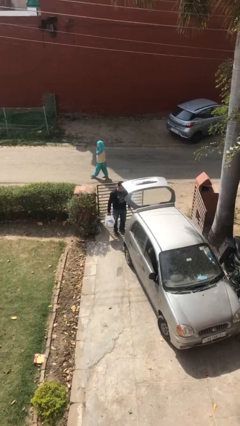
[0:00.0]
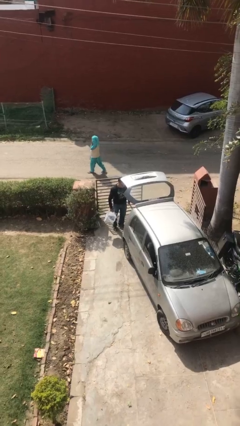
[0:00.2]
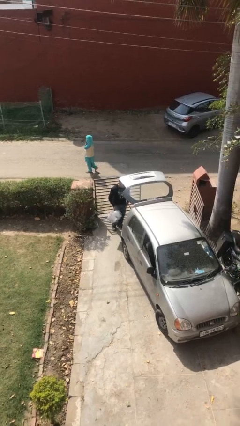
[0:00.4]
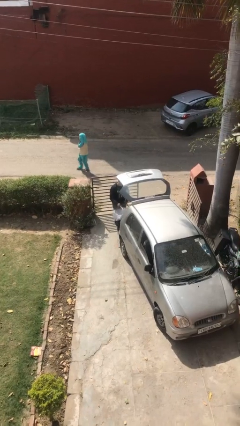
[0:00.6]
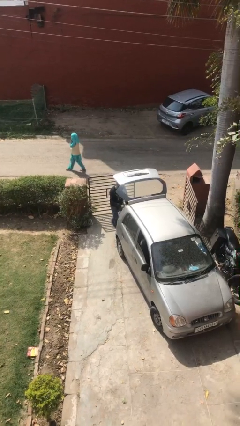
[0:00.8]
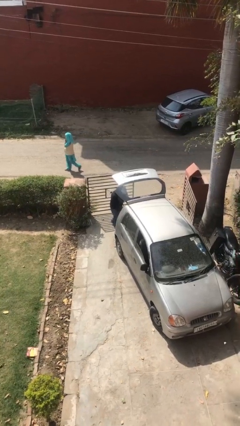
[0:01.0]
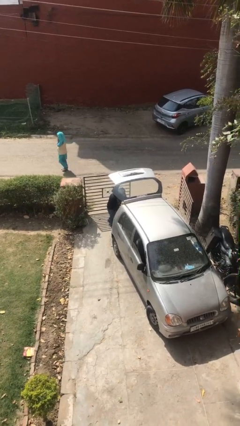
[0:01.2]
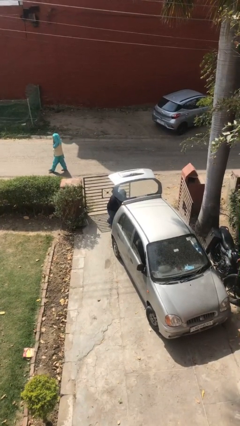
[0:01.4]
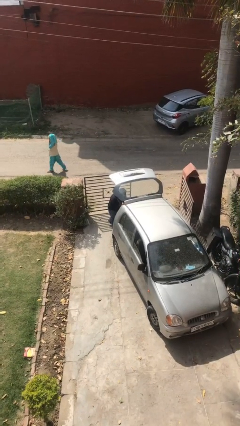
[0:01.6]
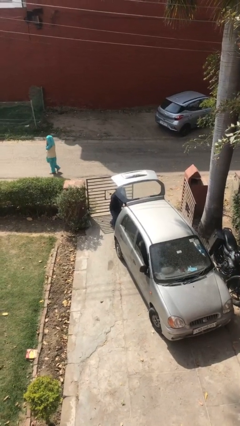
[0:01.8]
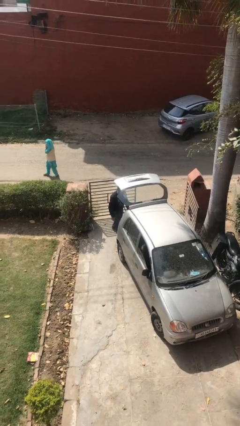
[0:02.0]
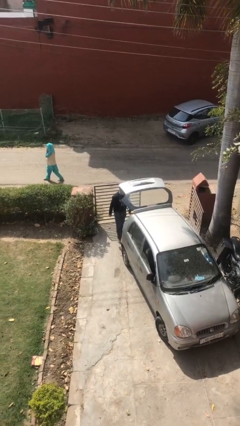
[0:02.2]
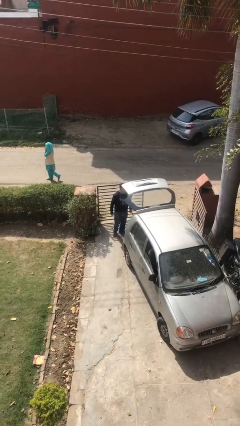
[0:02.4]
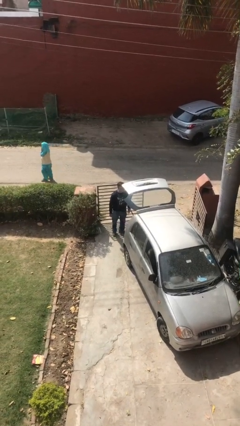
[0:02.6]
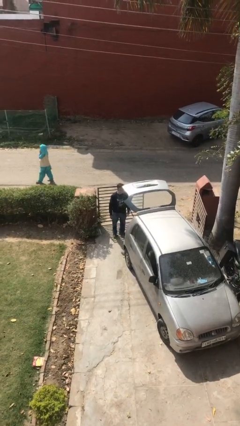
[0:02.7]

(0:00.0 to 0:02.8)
person loads car

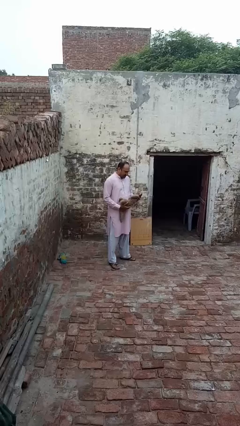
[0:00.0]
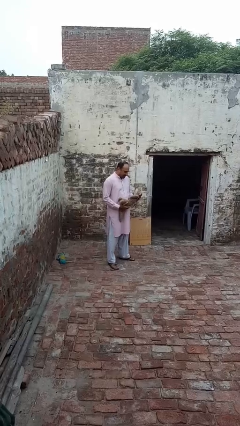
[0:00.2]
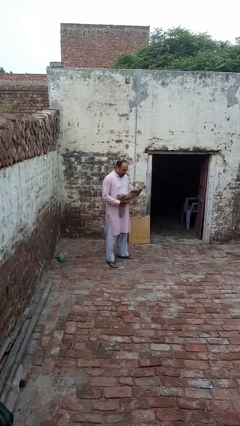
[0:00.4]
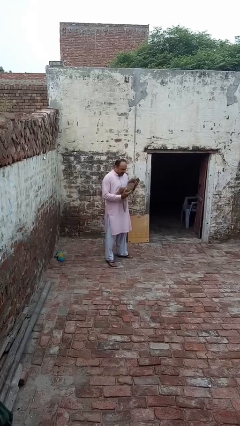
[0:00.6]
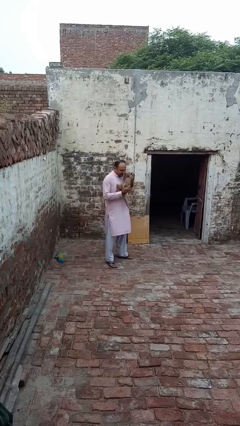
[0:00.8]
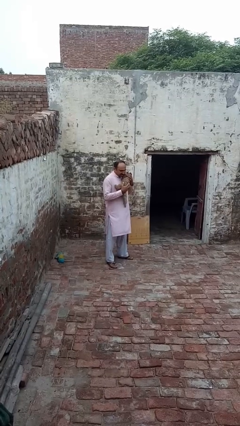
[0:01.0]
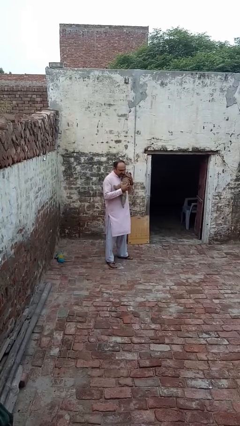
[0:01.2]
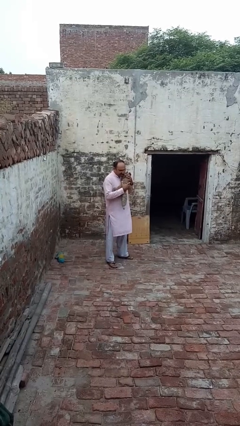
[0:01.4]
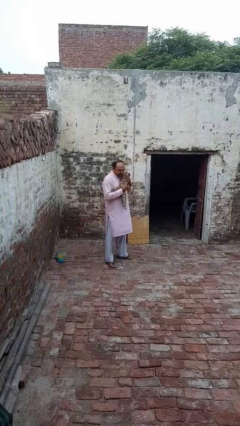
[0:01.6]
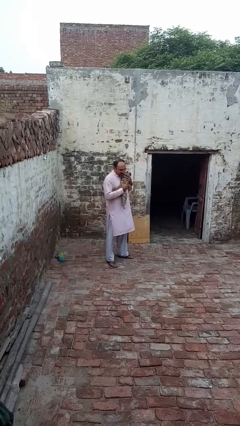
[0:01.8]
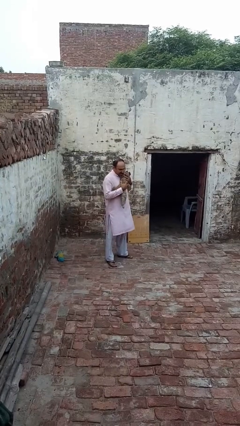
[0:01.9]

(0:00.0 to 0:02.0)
person hugs stuffed animal

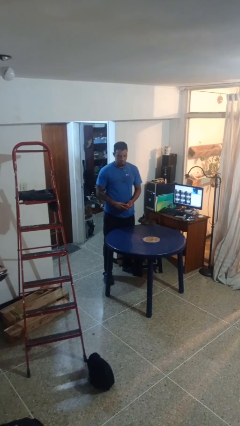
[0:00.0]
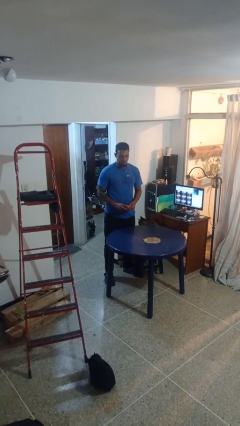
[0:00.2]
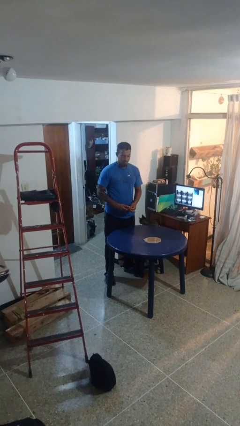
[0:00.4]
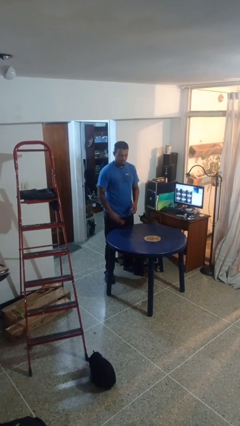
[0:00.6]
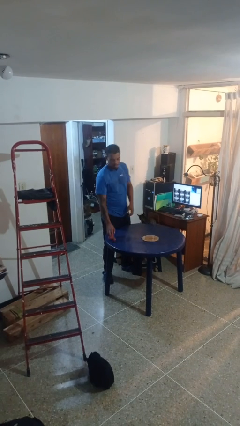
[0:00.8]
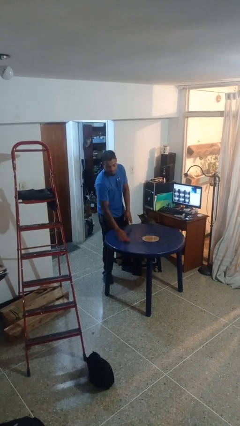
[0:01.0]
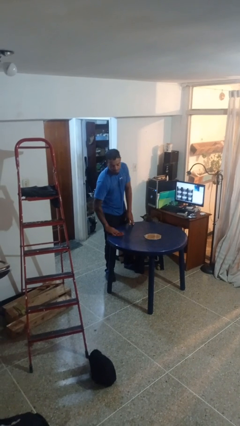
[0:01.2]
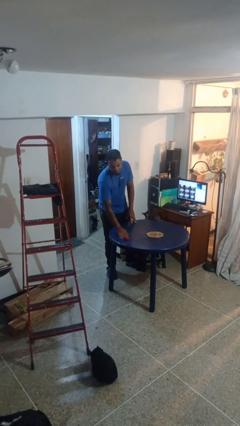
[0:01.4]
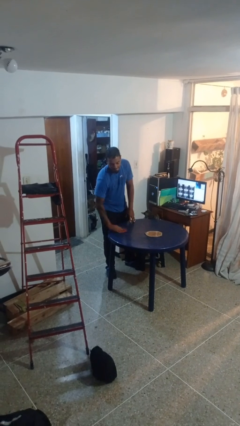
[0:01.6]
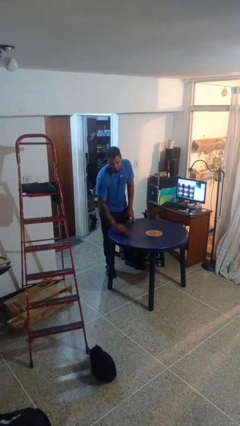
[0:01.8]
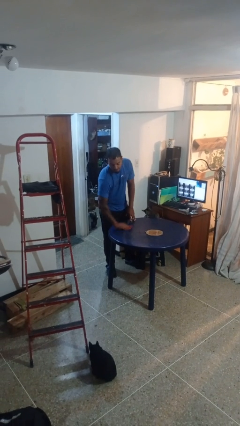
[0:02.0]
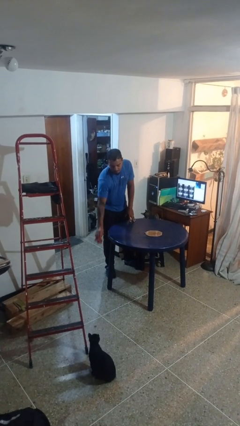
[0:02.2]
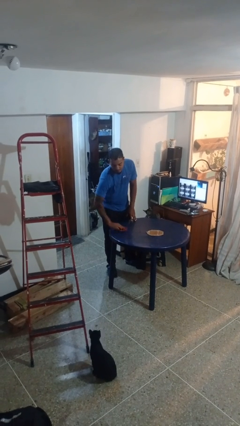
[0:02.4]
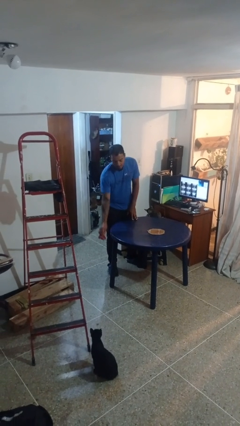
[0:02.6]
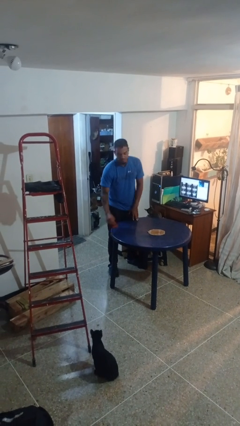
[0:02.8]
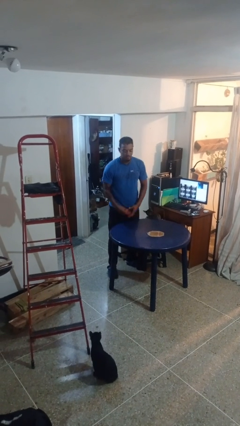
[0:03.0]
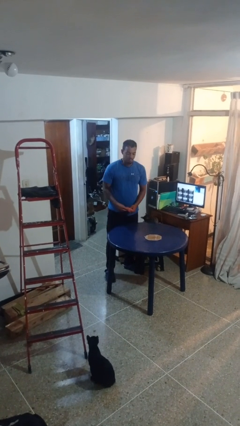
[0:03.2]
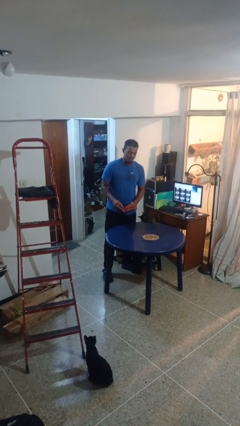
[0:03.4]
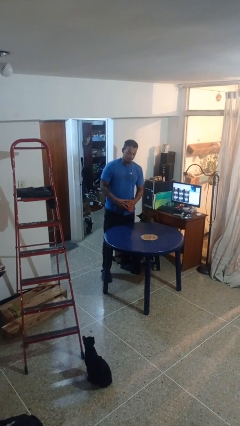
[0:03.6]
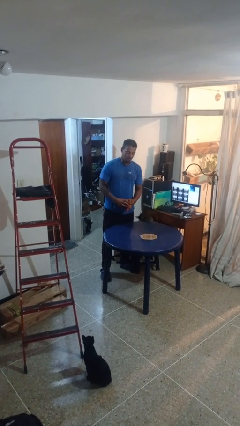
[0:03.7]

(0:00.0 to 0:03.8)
person cleans table with rag

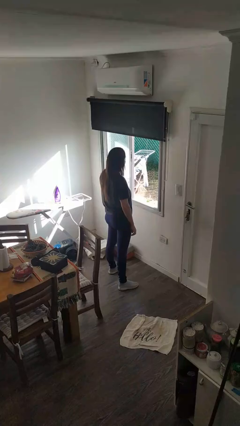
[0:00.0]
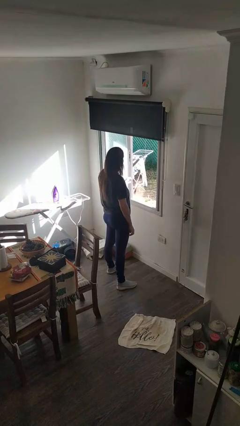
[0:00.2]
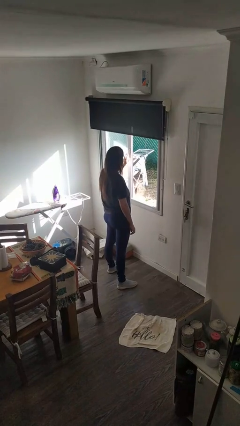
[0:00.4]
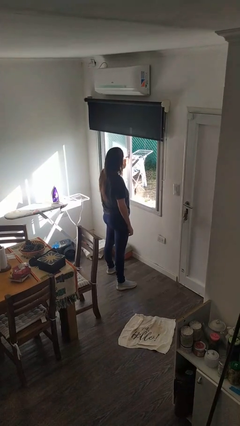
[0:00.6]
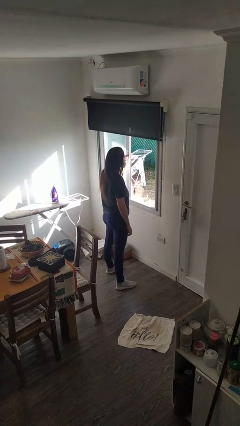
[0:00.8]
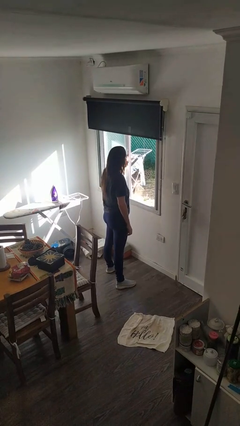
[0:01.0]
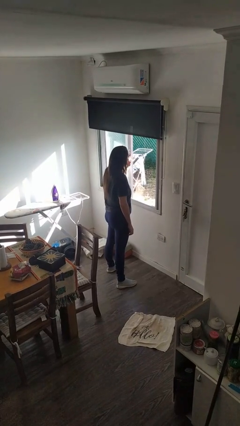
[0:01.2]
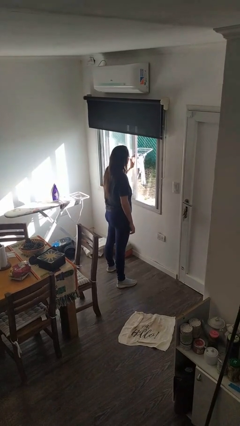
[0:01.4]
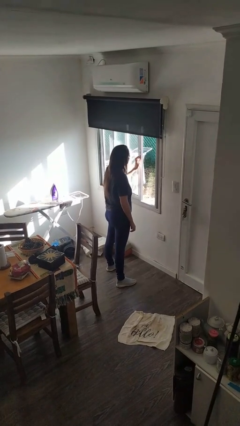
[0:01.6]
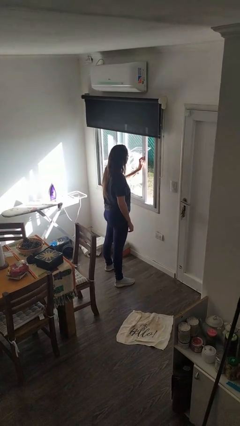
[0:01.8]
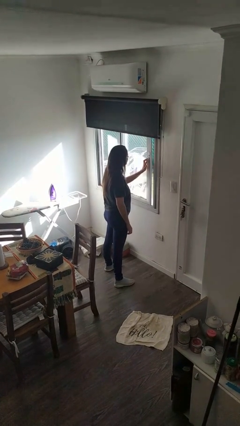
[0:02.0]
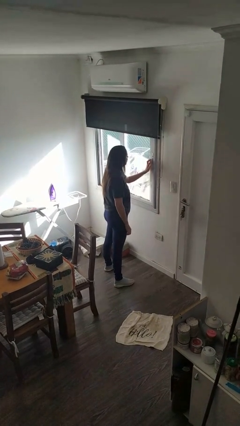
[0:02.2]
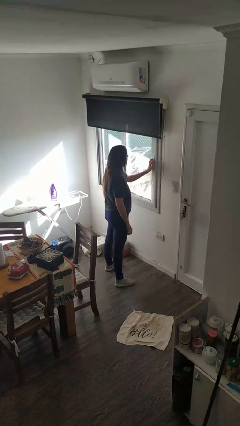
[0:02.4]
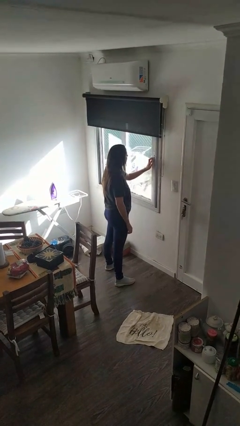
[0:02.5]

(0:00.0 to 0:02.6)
person closes home window

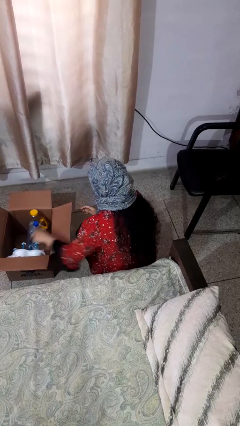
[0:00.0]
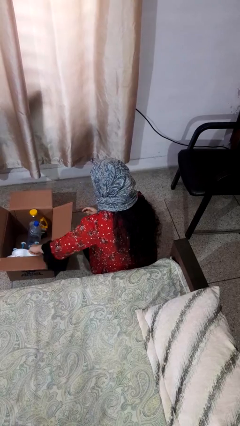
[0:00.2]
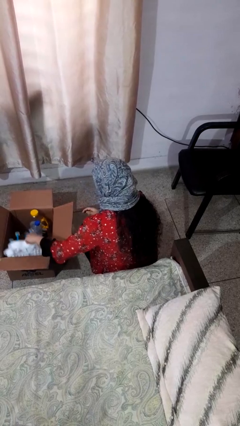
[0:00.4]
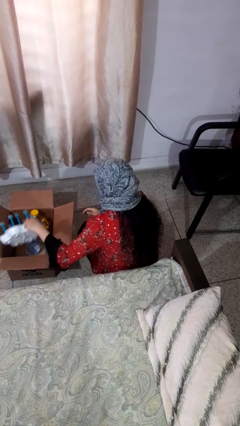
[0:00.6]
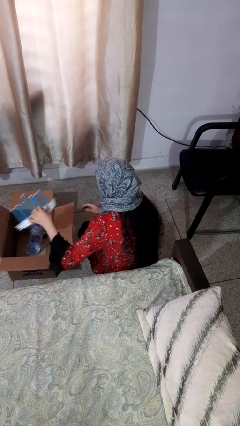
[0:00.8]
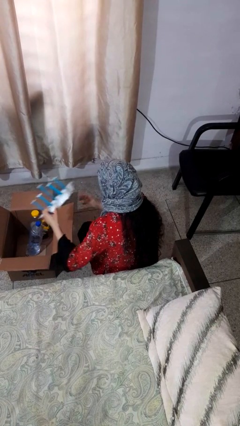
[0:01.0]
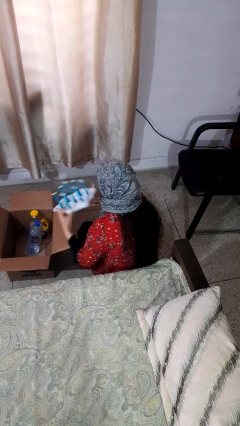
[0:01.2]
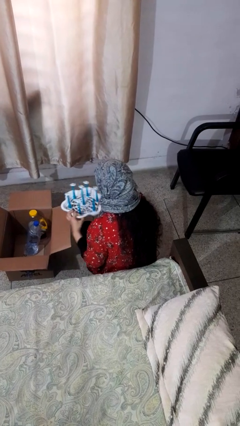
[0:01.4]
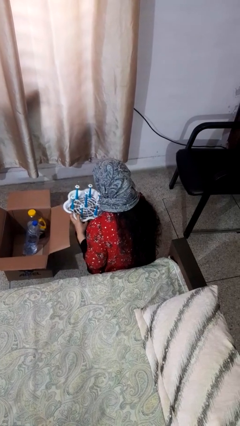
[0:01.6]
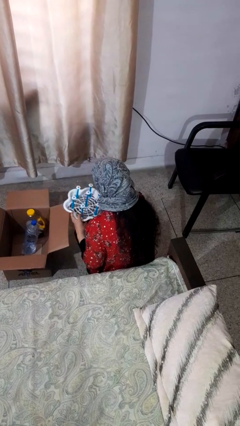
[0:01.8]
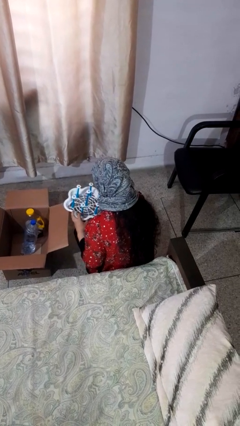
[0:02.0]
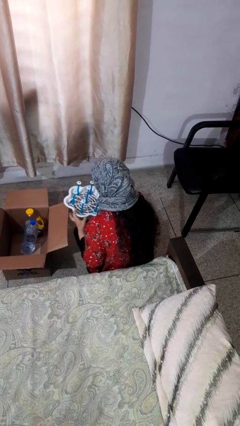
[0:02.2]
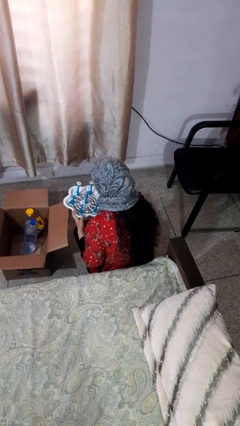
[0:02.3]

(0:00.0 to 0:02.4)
person takes object from box

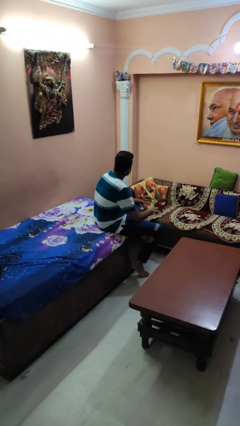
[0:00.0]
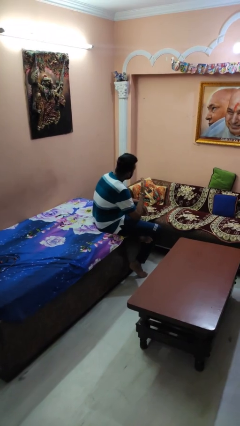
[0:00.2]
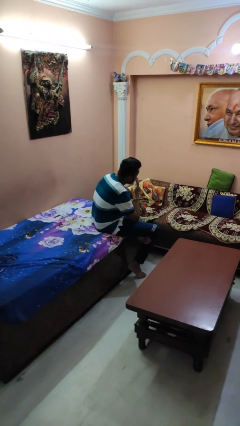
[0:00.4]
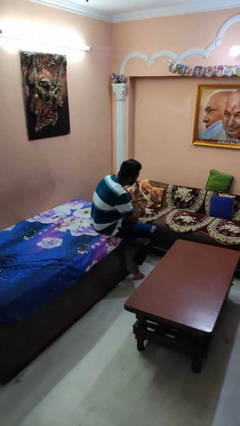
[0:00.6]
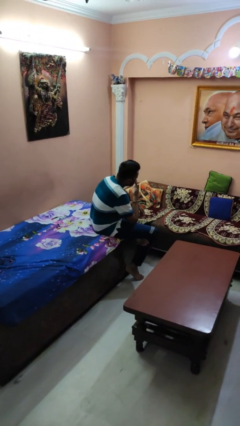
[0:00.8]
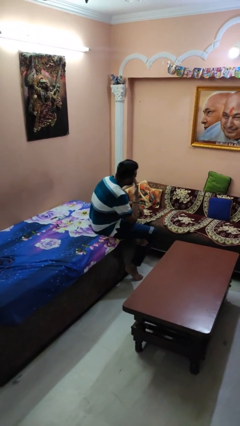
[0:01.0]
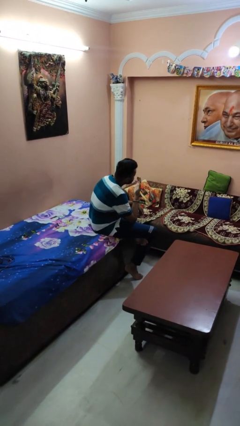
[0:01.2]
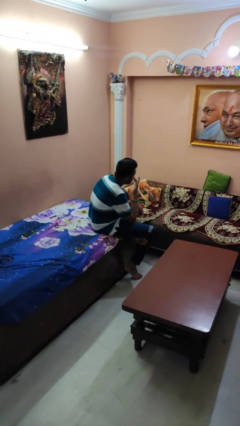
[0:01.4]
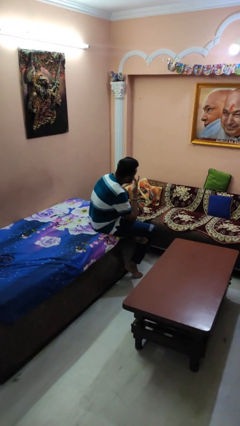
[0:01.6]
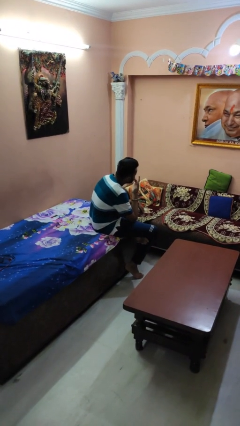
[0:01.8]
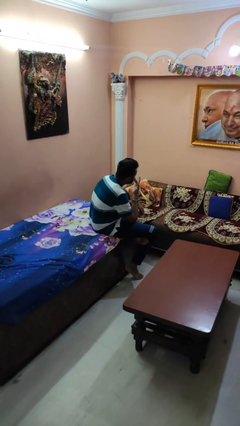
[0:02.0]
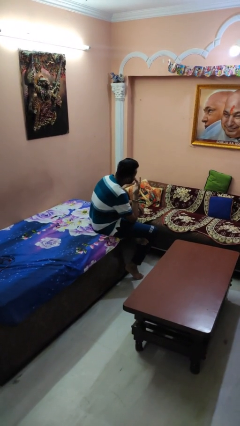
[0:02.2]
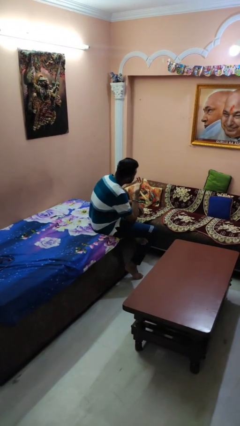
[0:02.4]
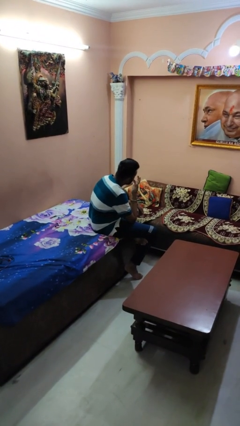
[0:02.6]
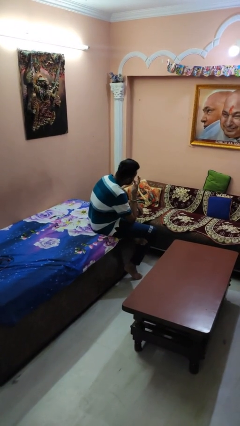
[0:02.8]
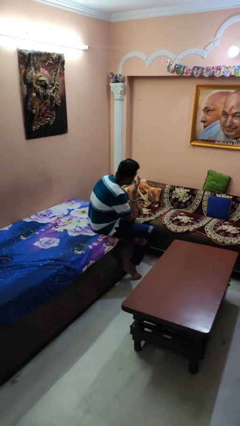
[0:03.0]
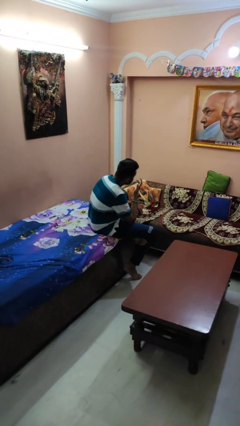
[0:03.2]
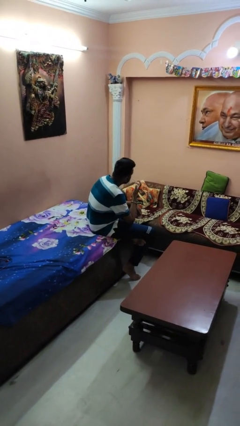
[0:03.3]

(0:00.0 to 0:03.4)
person licks fingers
